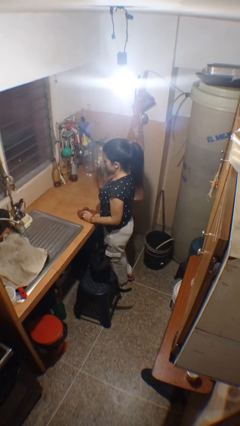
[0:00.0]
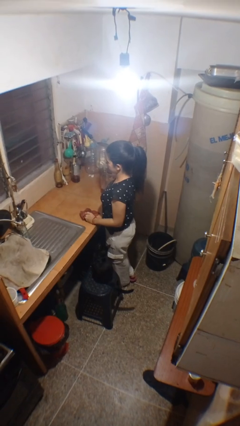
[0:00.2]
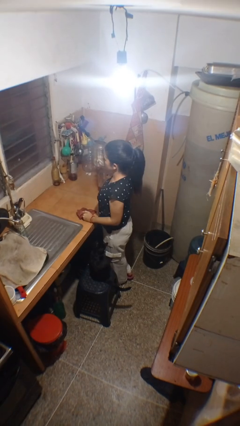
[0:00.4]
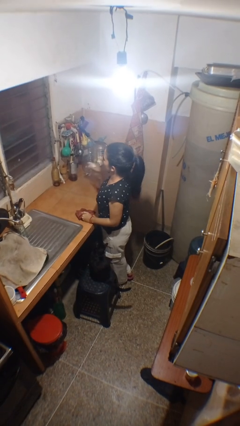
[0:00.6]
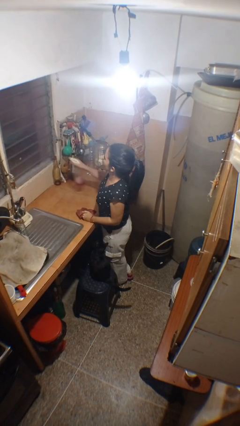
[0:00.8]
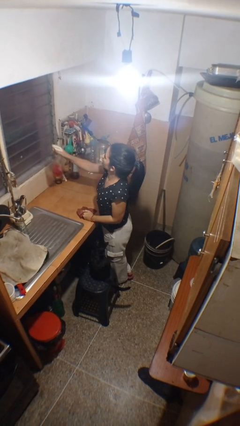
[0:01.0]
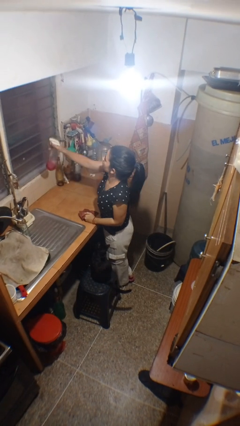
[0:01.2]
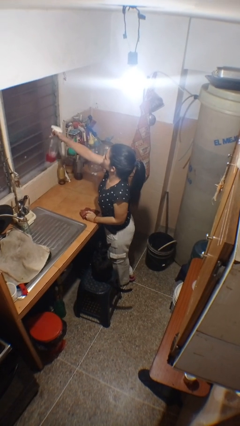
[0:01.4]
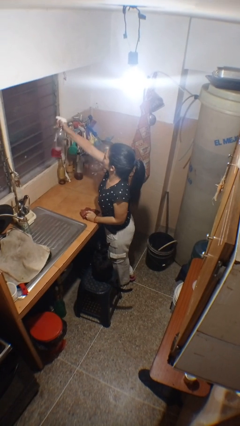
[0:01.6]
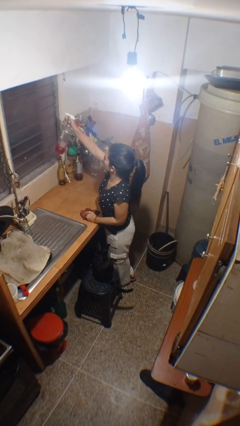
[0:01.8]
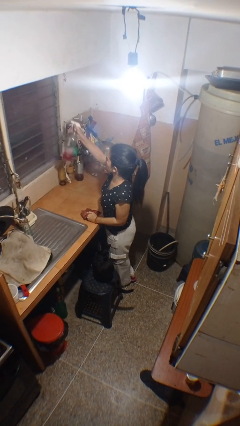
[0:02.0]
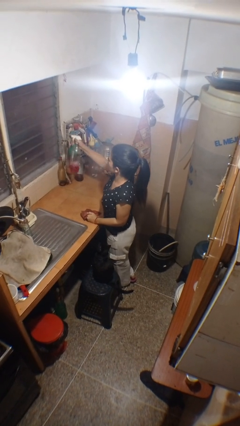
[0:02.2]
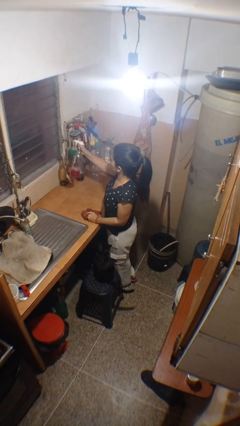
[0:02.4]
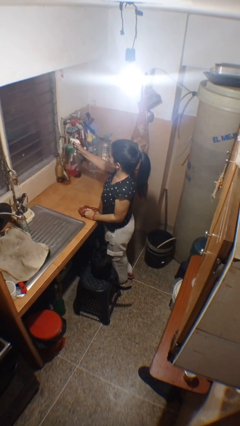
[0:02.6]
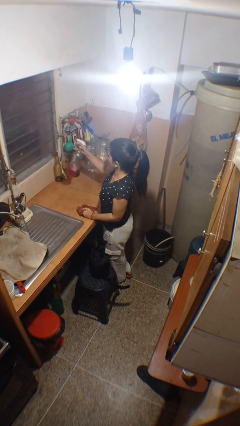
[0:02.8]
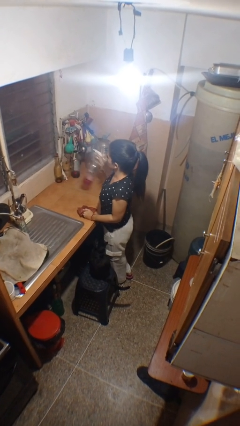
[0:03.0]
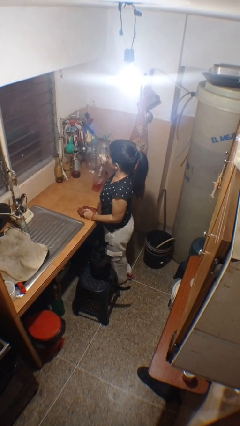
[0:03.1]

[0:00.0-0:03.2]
person sprays from bottle

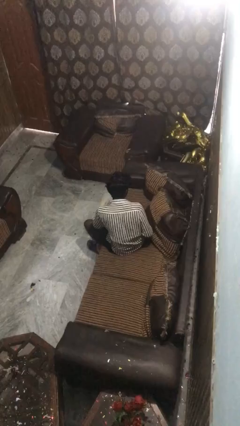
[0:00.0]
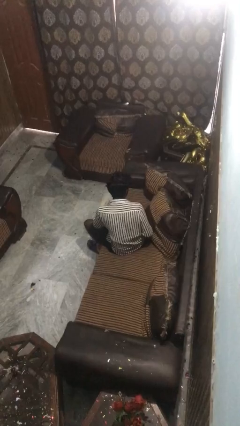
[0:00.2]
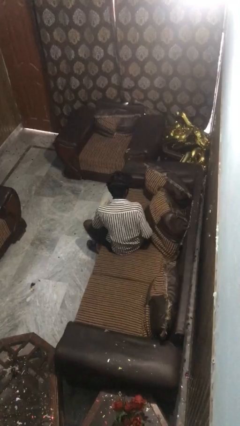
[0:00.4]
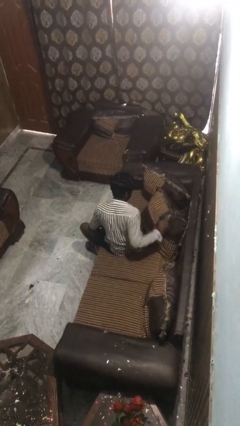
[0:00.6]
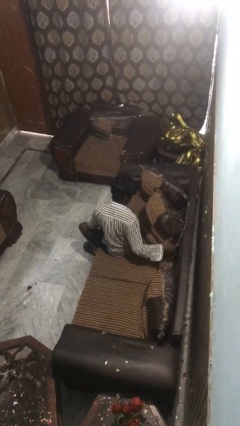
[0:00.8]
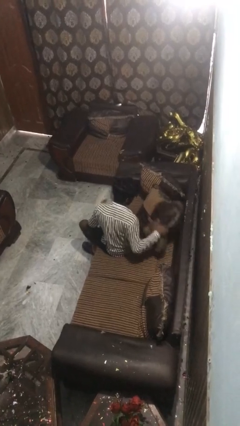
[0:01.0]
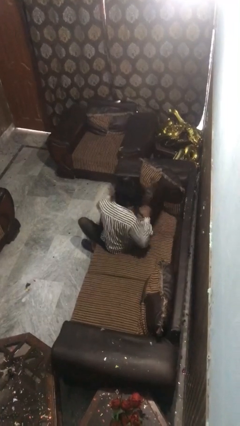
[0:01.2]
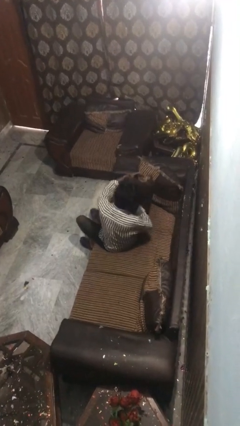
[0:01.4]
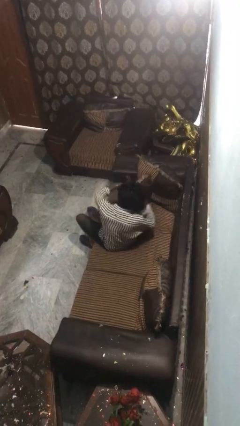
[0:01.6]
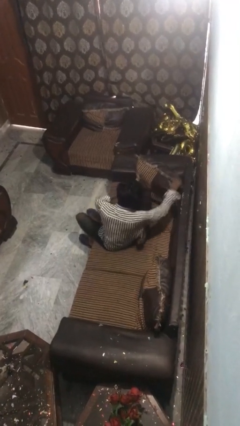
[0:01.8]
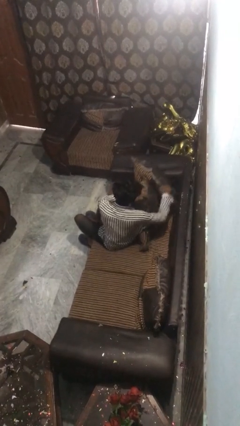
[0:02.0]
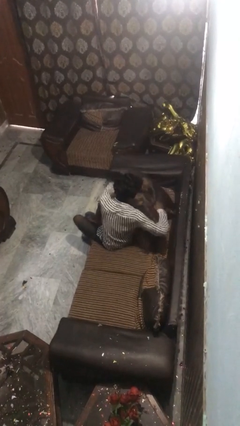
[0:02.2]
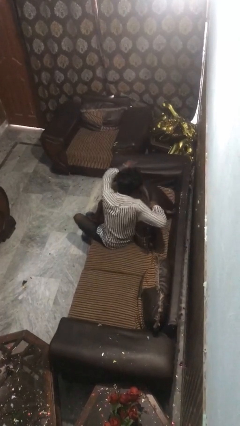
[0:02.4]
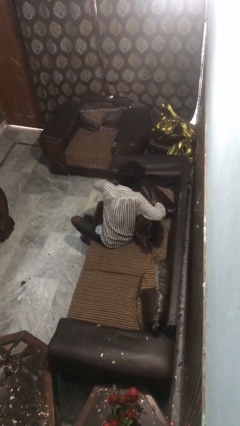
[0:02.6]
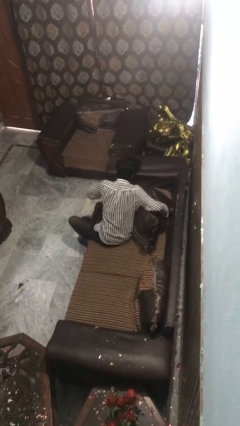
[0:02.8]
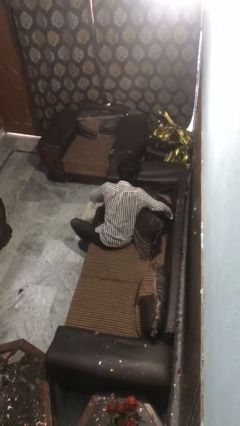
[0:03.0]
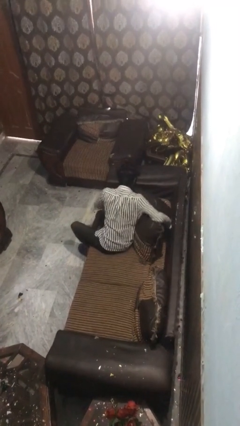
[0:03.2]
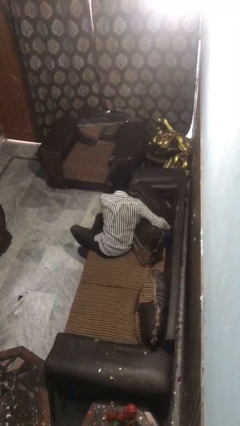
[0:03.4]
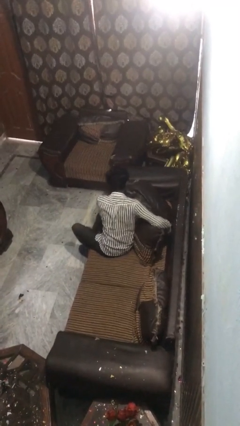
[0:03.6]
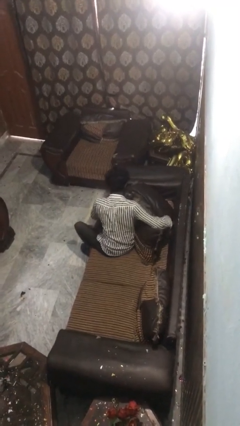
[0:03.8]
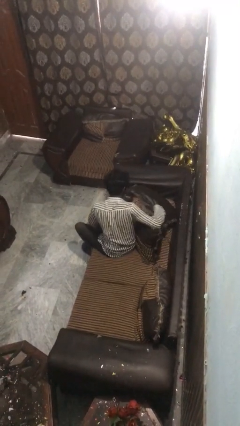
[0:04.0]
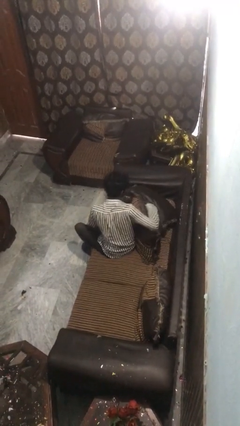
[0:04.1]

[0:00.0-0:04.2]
person searches in couch

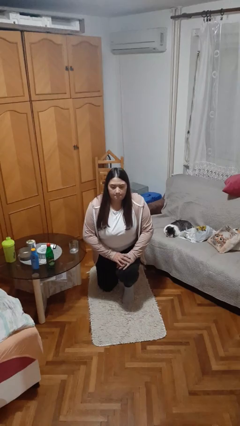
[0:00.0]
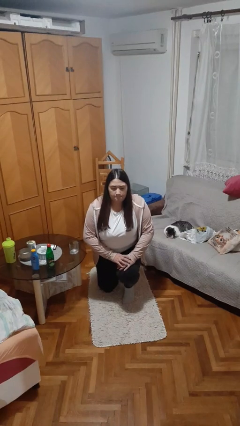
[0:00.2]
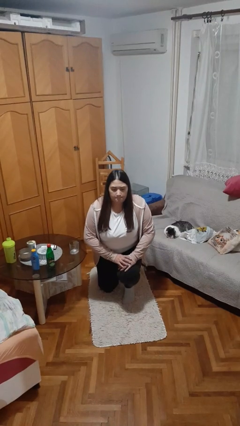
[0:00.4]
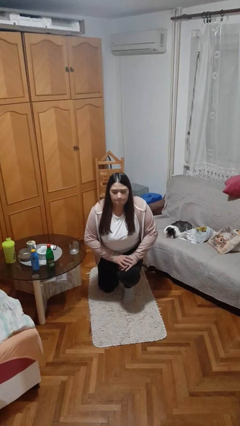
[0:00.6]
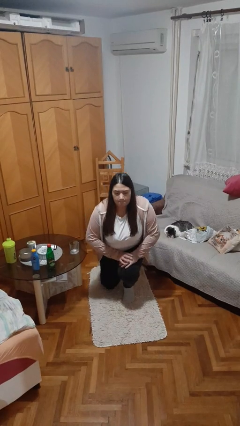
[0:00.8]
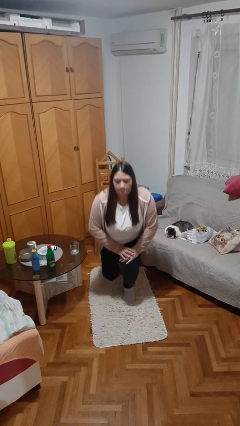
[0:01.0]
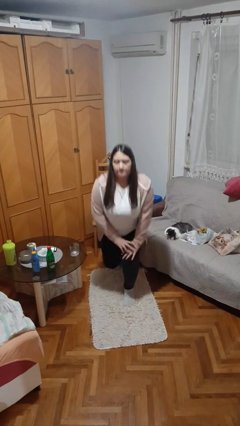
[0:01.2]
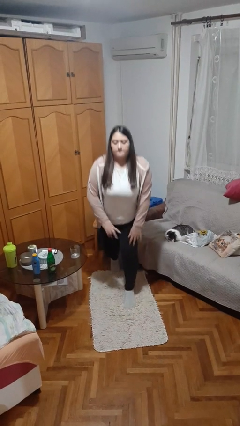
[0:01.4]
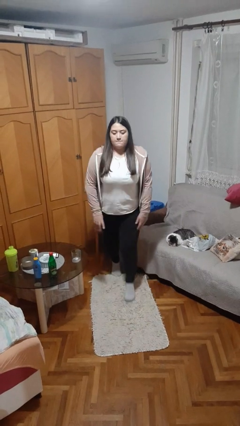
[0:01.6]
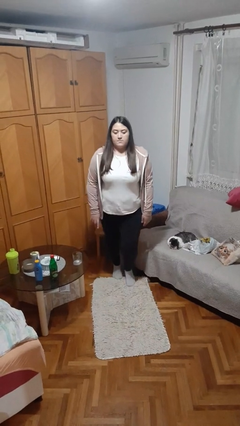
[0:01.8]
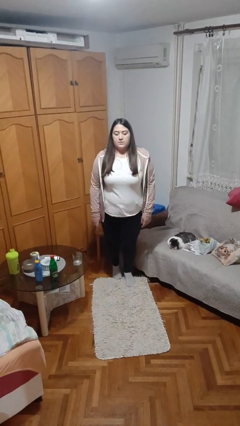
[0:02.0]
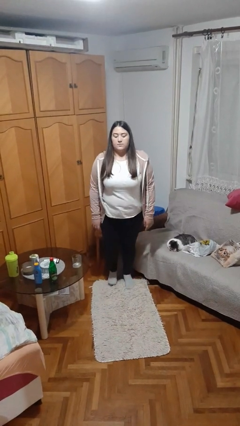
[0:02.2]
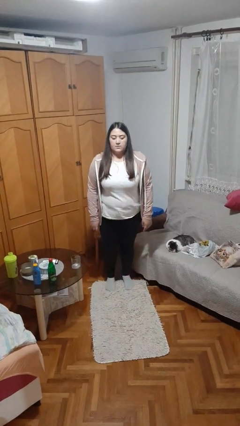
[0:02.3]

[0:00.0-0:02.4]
person stands up from floor

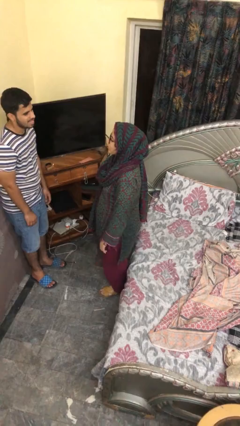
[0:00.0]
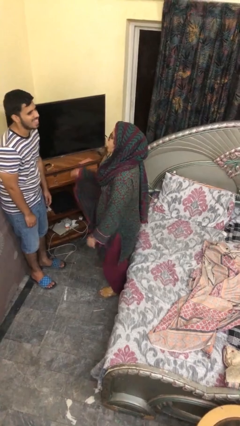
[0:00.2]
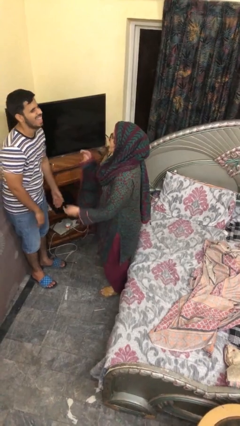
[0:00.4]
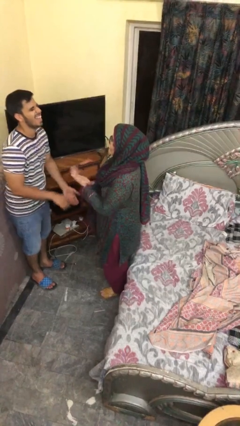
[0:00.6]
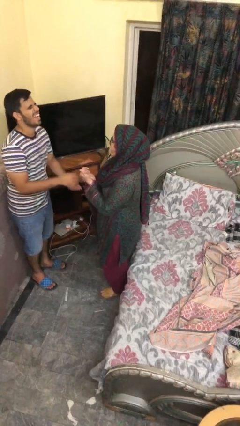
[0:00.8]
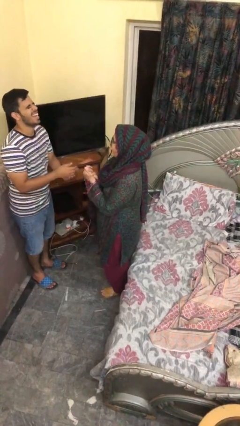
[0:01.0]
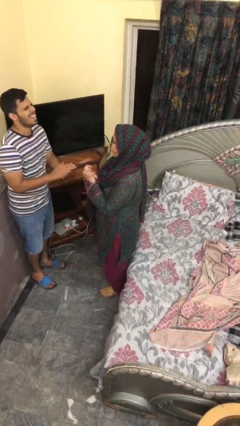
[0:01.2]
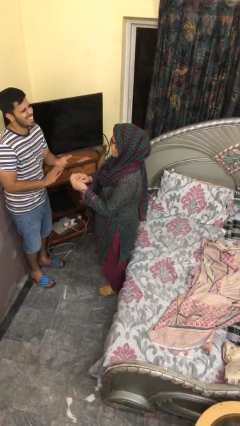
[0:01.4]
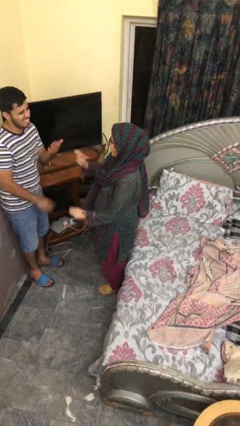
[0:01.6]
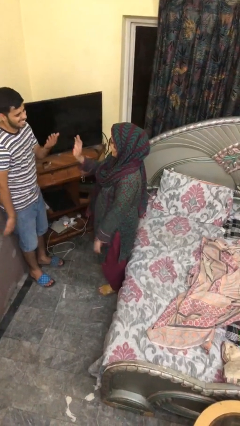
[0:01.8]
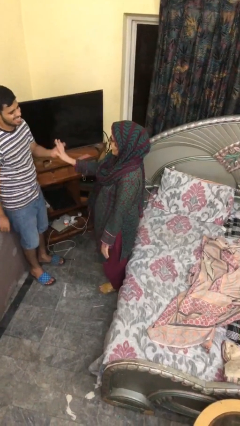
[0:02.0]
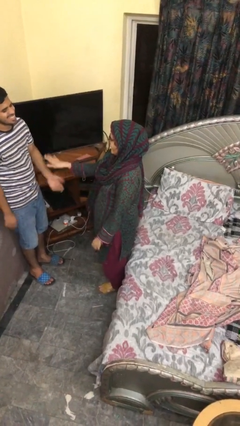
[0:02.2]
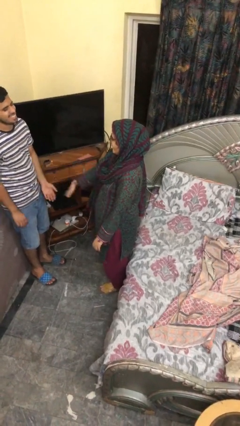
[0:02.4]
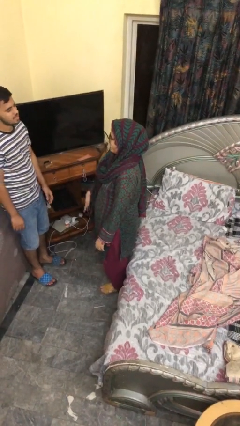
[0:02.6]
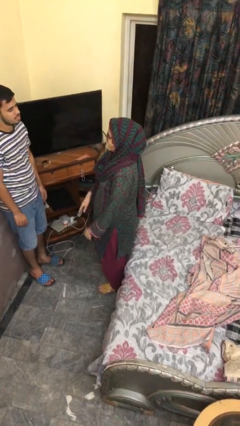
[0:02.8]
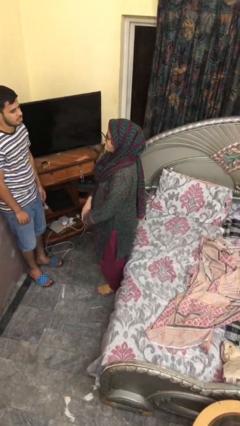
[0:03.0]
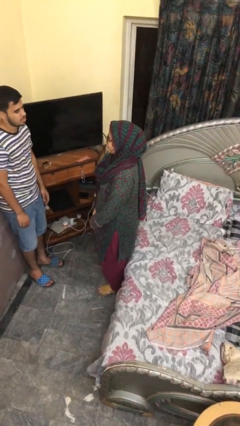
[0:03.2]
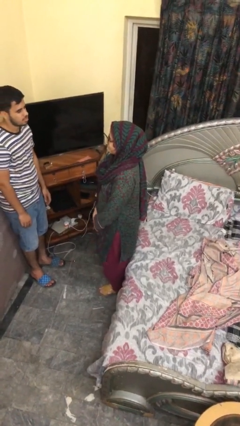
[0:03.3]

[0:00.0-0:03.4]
person laughs with person

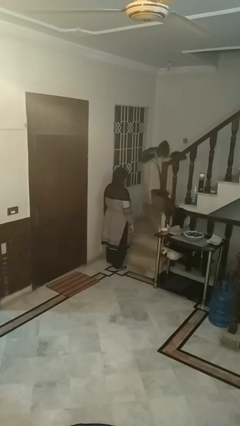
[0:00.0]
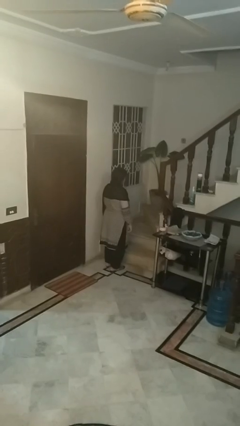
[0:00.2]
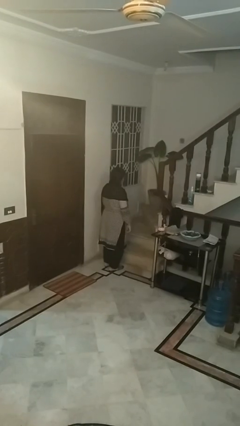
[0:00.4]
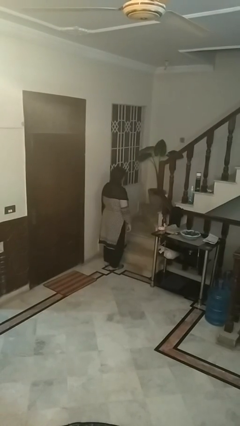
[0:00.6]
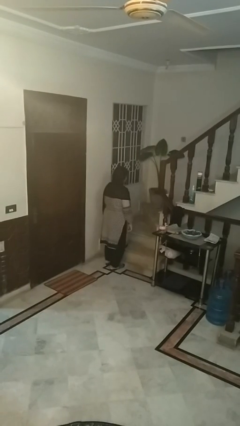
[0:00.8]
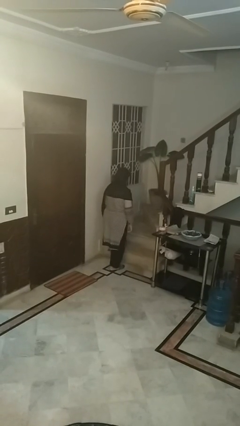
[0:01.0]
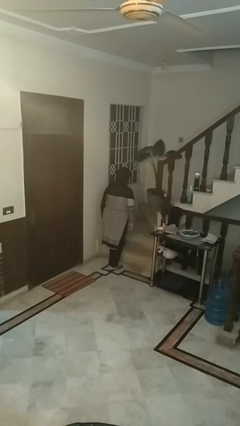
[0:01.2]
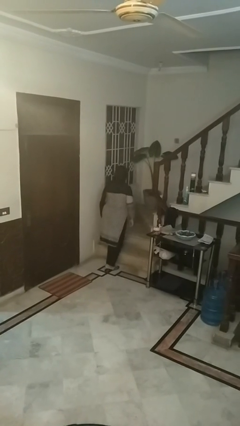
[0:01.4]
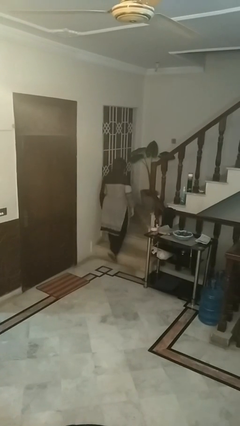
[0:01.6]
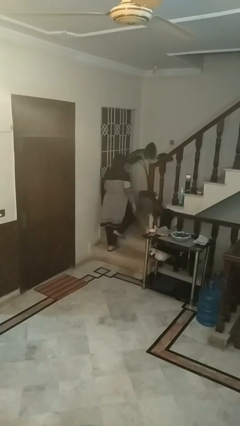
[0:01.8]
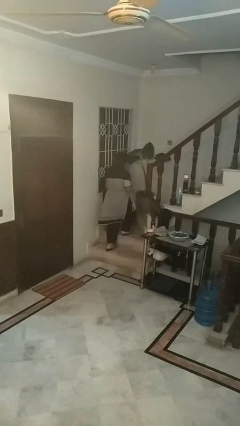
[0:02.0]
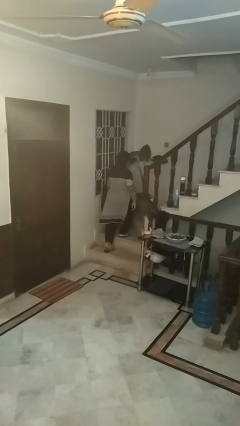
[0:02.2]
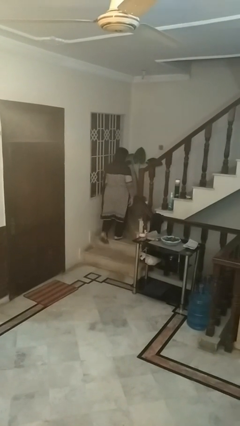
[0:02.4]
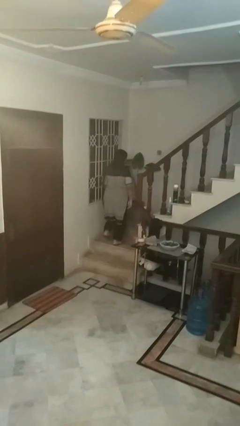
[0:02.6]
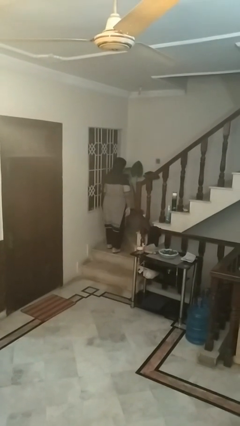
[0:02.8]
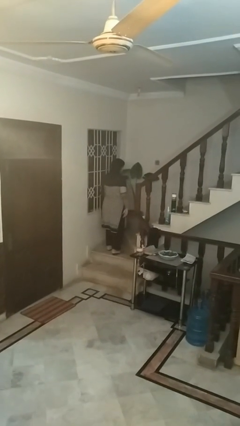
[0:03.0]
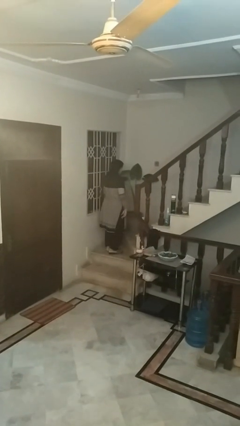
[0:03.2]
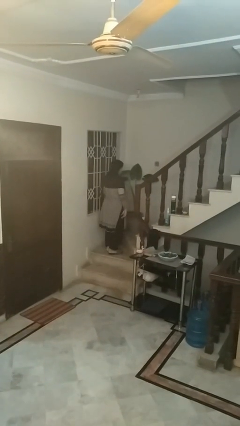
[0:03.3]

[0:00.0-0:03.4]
person climbs up stairs

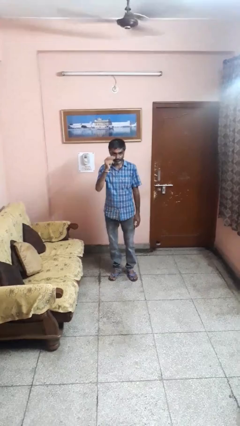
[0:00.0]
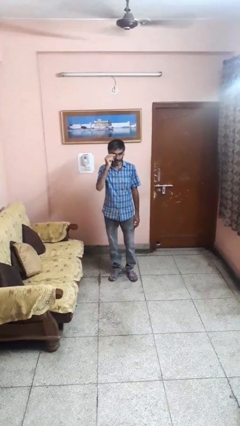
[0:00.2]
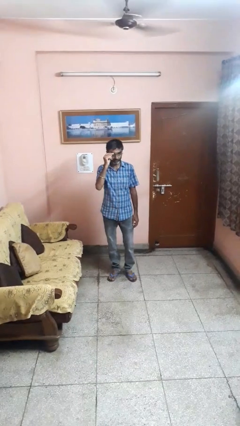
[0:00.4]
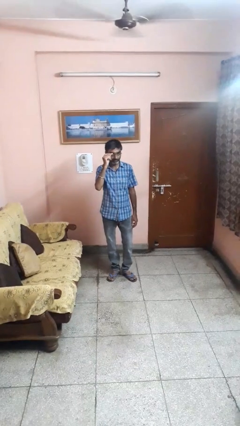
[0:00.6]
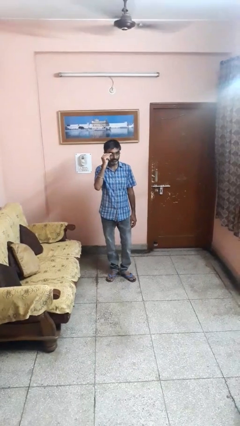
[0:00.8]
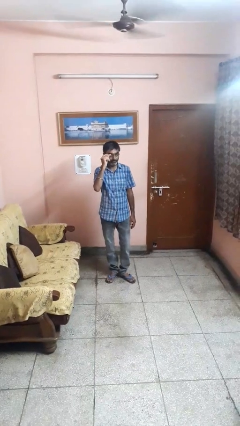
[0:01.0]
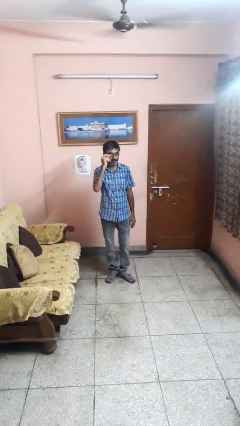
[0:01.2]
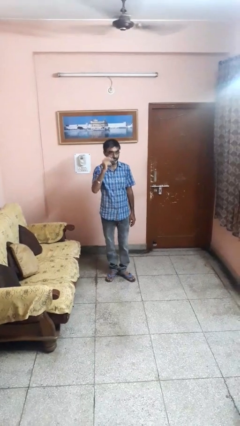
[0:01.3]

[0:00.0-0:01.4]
person puts on glasses
